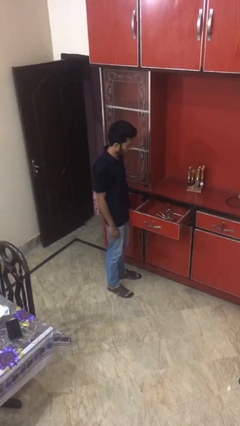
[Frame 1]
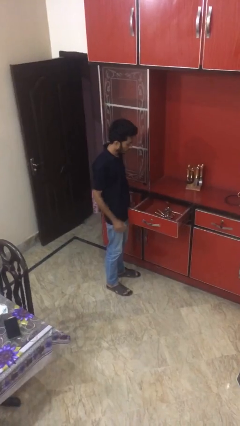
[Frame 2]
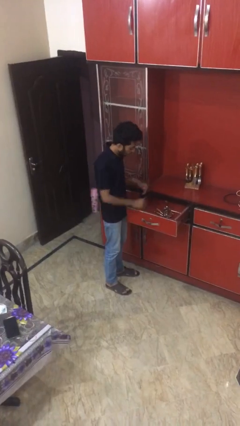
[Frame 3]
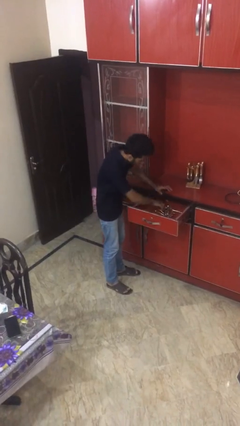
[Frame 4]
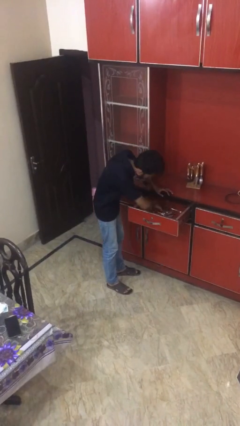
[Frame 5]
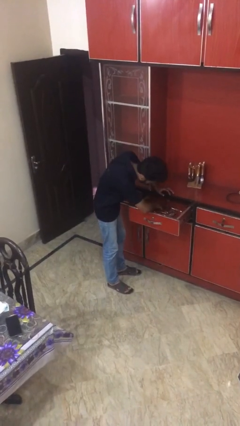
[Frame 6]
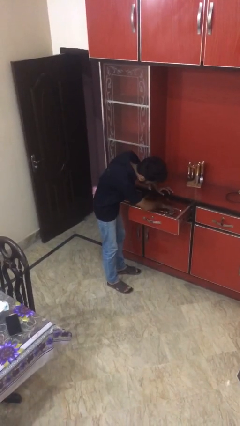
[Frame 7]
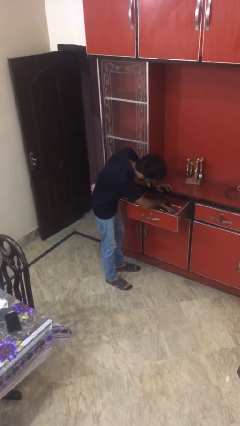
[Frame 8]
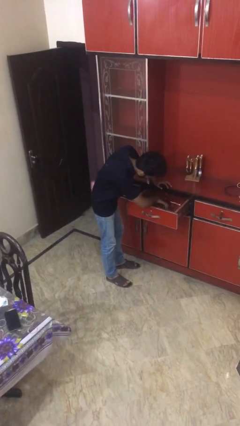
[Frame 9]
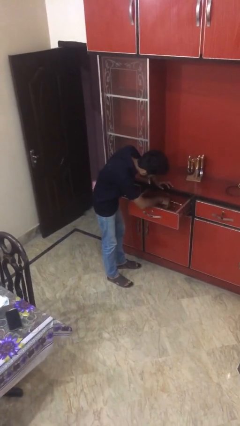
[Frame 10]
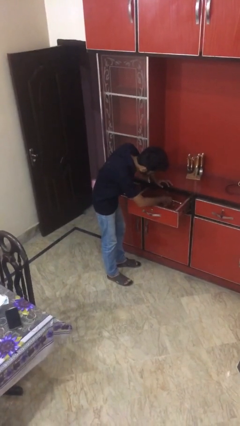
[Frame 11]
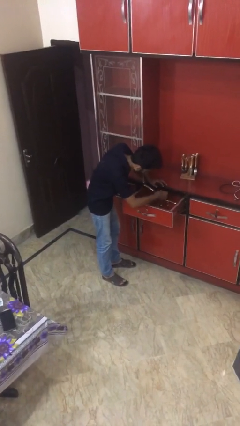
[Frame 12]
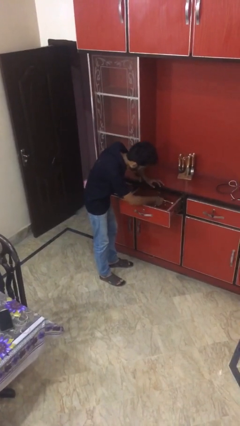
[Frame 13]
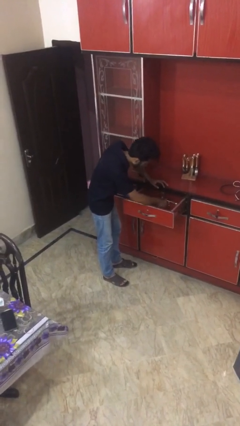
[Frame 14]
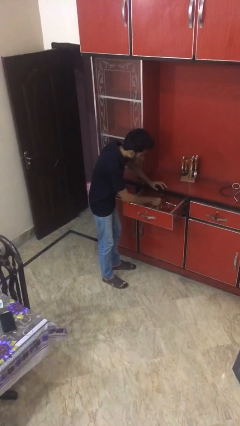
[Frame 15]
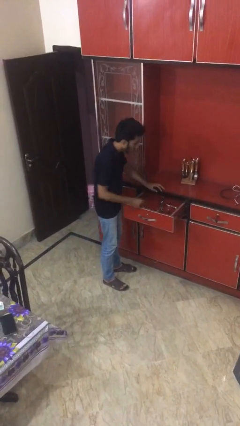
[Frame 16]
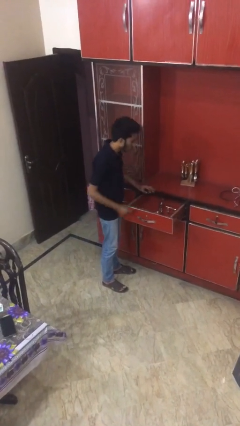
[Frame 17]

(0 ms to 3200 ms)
person searches in kitchen drawer

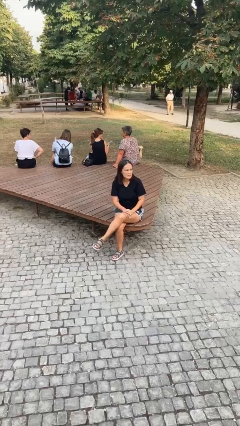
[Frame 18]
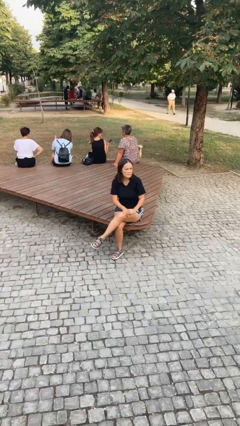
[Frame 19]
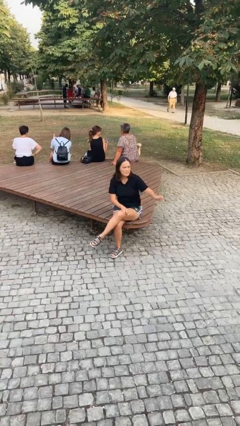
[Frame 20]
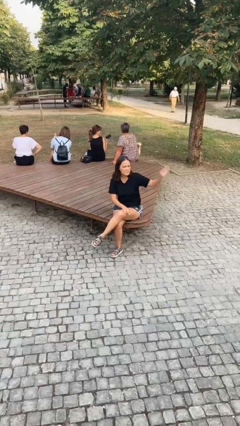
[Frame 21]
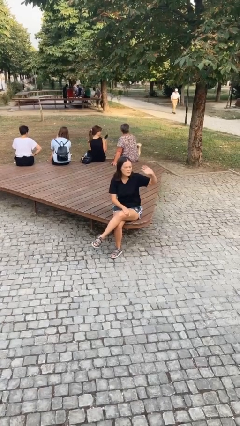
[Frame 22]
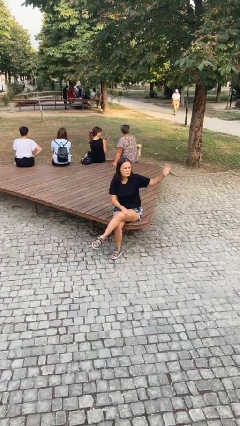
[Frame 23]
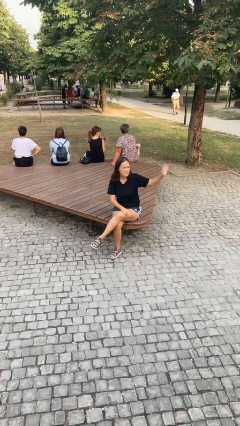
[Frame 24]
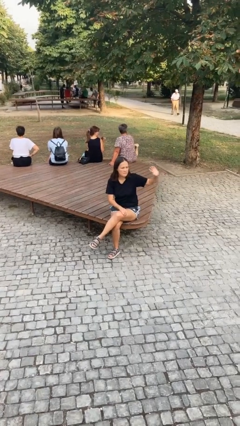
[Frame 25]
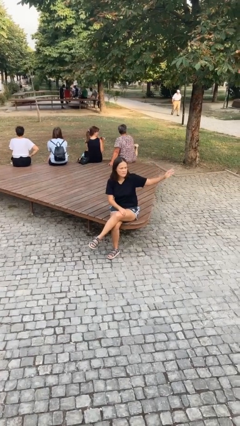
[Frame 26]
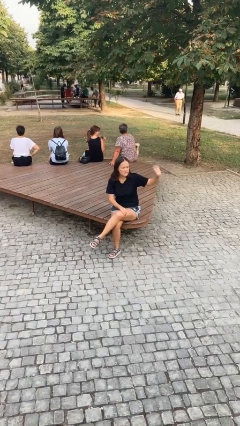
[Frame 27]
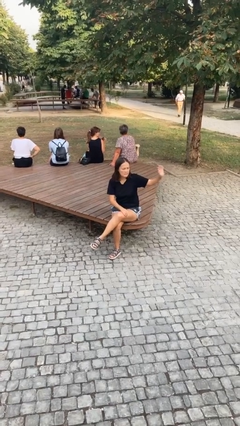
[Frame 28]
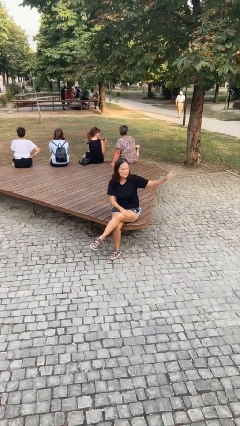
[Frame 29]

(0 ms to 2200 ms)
person waves at person

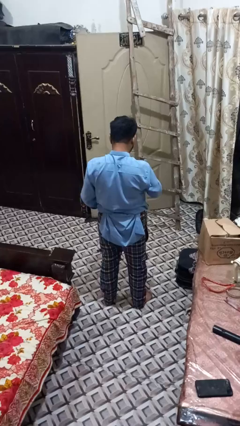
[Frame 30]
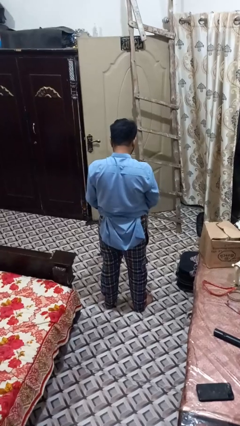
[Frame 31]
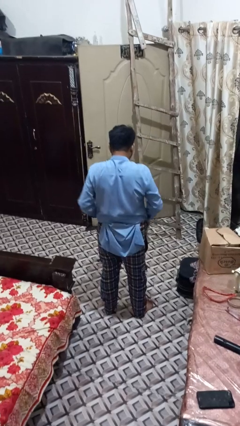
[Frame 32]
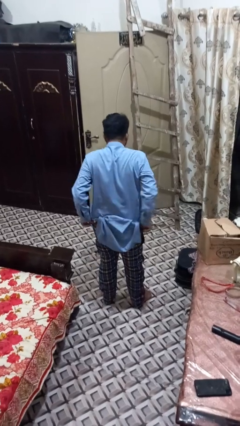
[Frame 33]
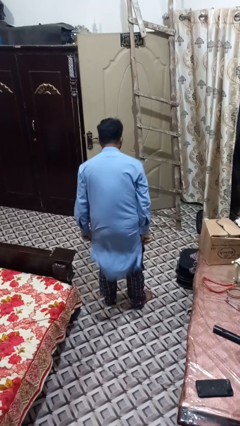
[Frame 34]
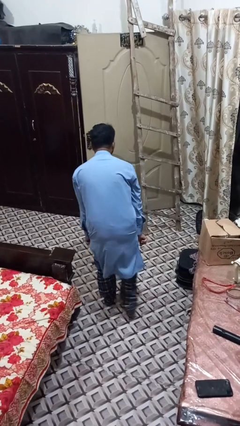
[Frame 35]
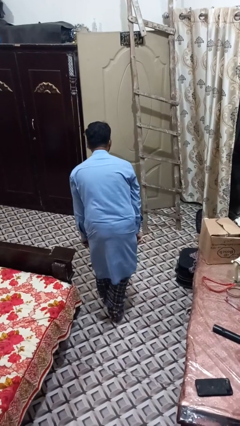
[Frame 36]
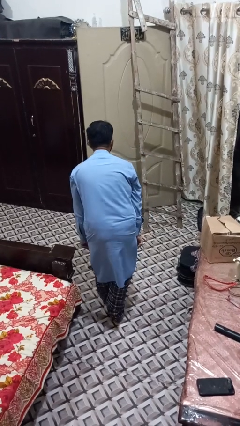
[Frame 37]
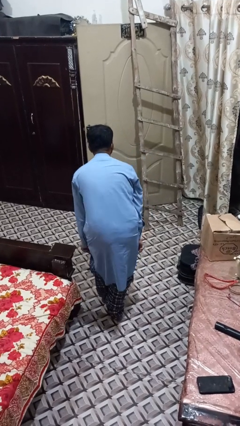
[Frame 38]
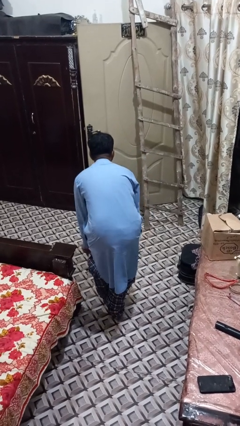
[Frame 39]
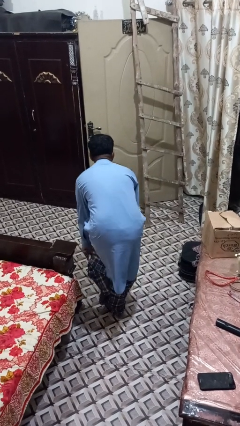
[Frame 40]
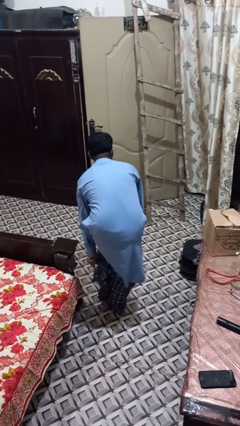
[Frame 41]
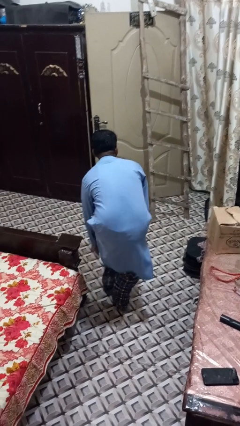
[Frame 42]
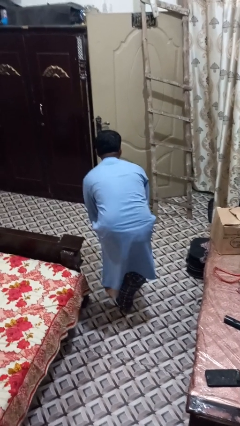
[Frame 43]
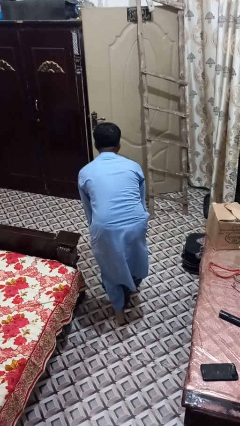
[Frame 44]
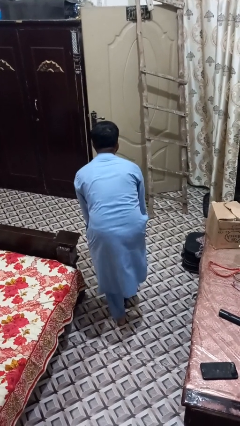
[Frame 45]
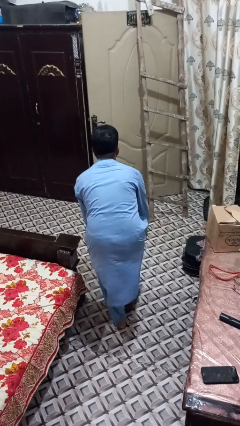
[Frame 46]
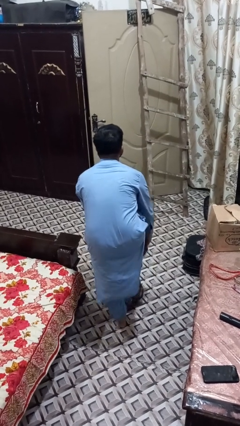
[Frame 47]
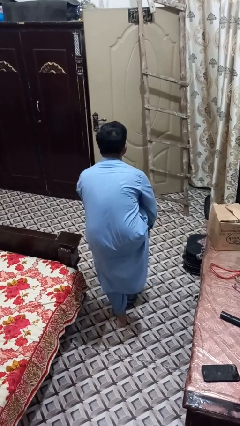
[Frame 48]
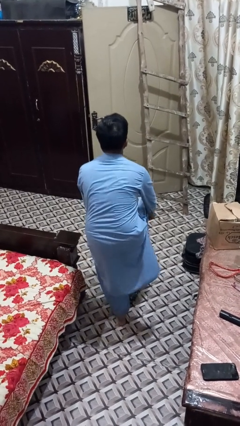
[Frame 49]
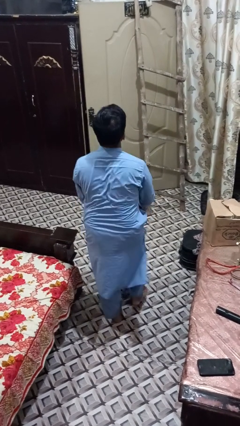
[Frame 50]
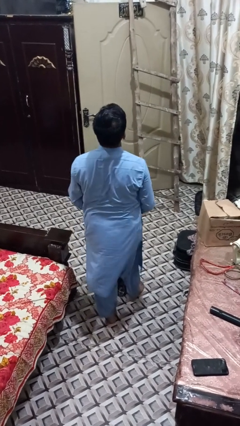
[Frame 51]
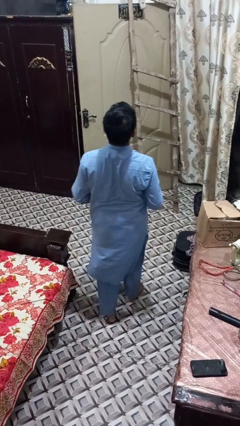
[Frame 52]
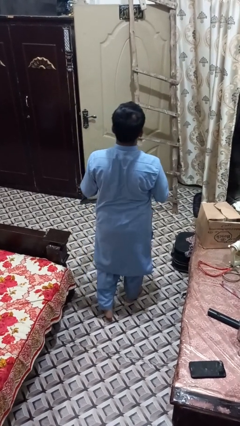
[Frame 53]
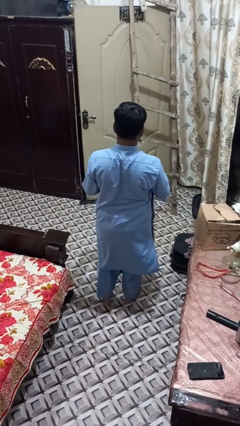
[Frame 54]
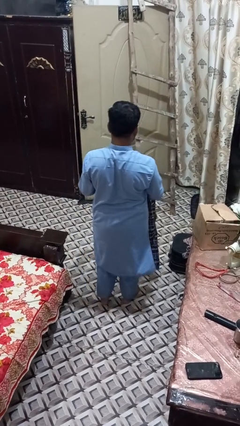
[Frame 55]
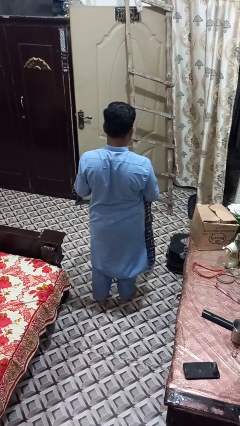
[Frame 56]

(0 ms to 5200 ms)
person takes off pants

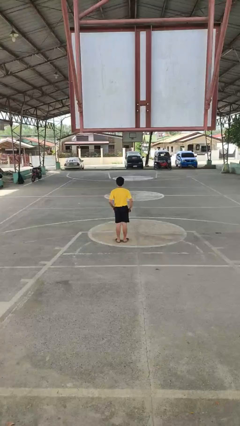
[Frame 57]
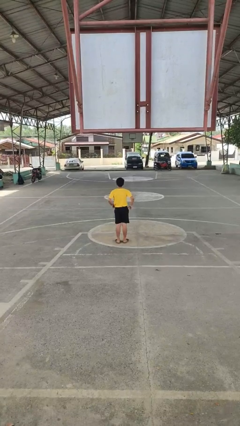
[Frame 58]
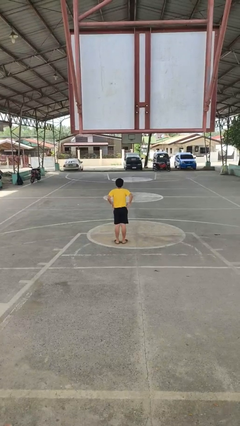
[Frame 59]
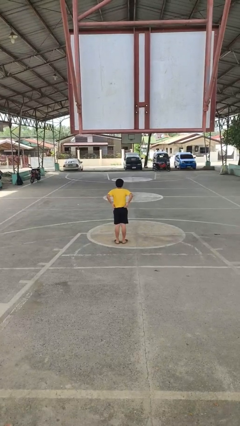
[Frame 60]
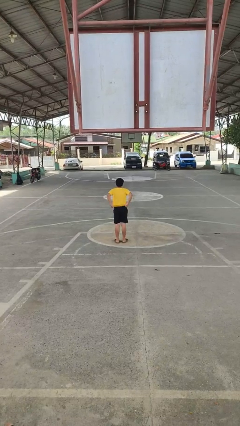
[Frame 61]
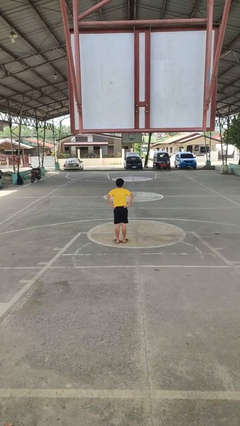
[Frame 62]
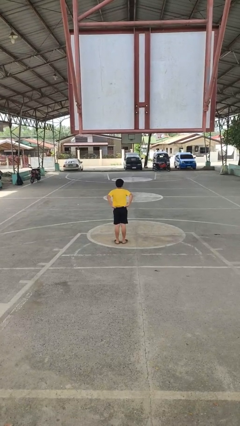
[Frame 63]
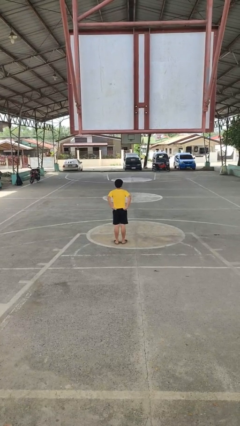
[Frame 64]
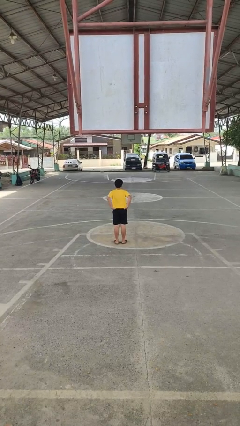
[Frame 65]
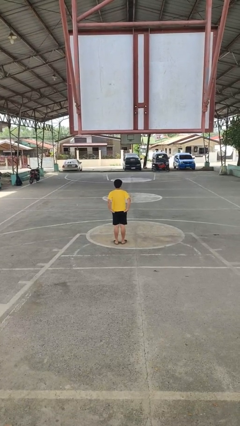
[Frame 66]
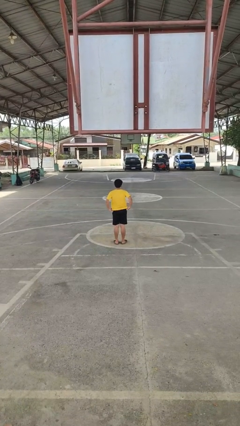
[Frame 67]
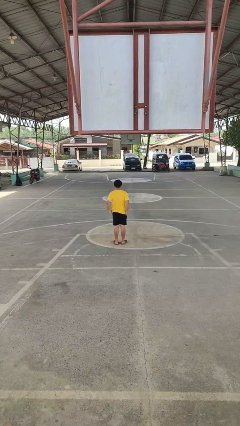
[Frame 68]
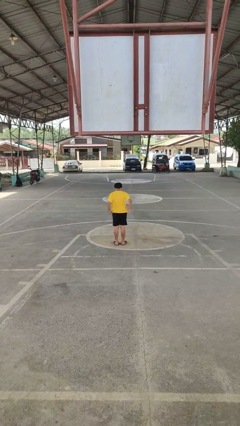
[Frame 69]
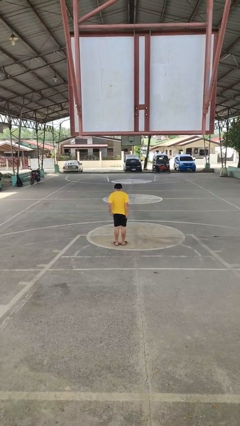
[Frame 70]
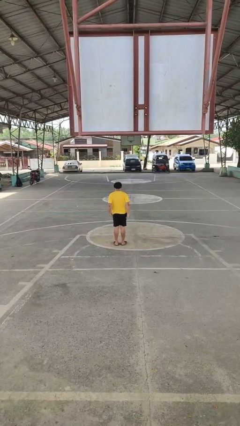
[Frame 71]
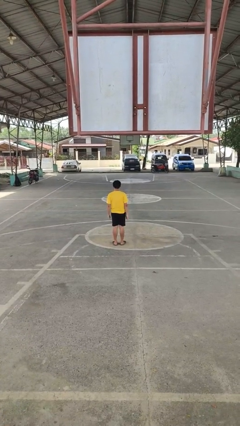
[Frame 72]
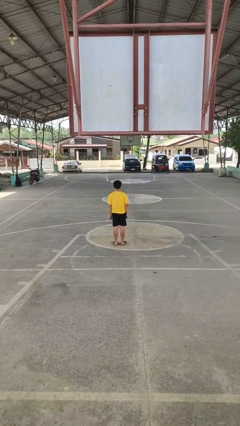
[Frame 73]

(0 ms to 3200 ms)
person untucks shirt

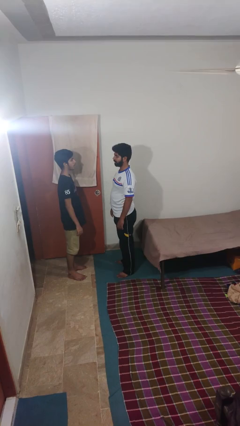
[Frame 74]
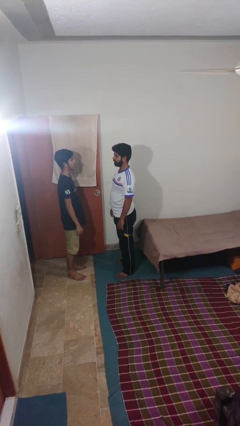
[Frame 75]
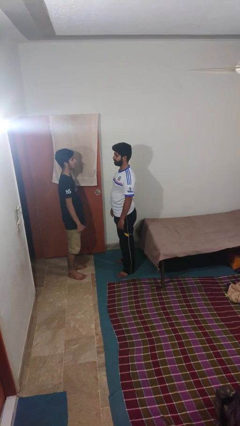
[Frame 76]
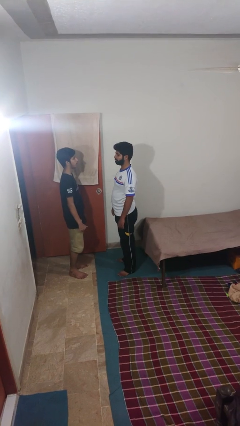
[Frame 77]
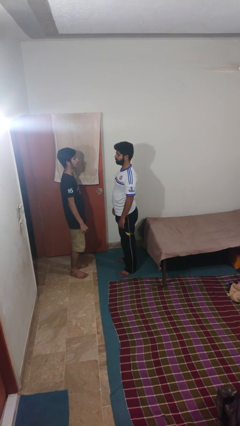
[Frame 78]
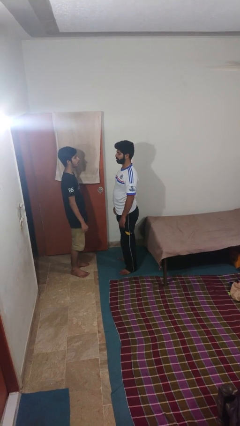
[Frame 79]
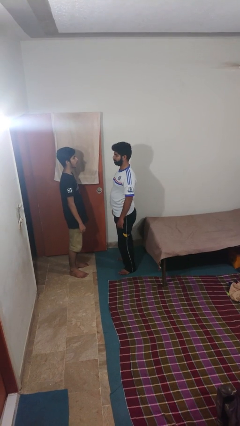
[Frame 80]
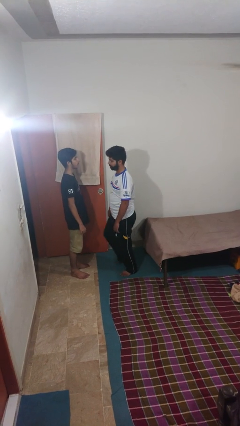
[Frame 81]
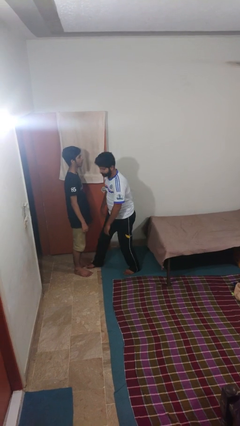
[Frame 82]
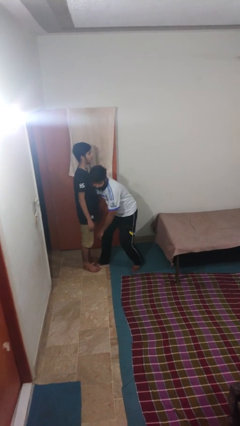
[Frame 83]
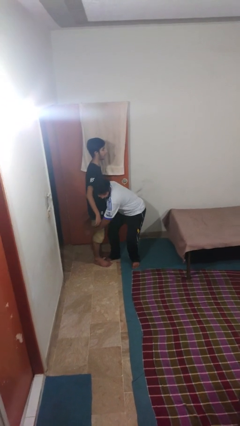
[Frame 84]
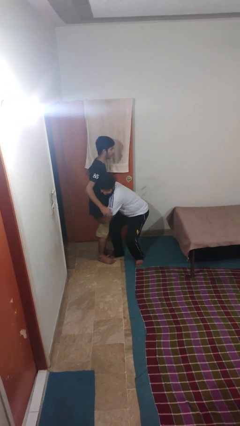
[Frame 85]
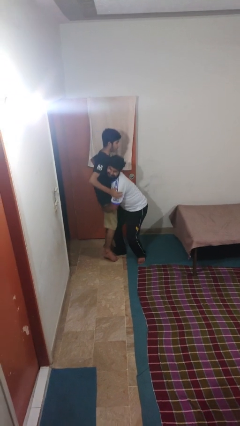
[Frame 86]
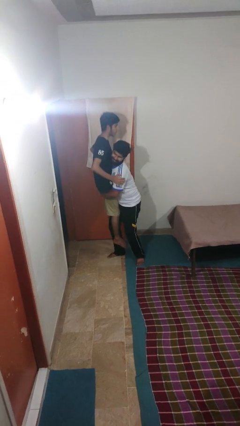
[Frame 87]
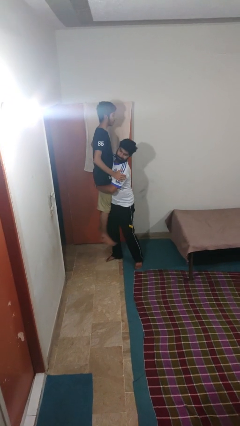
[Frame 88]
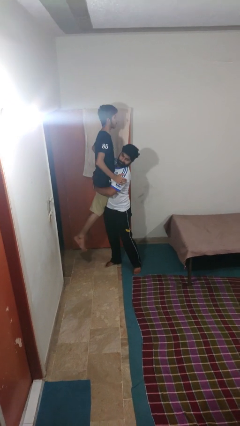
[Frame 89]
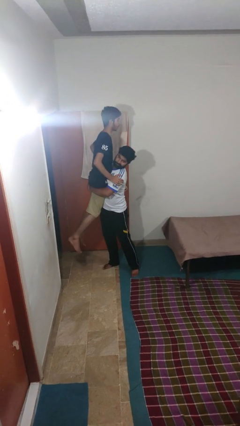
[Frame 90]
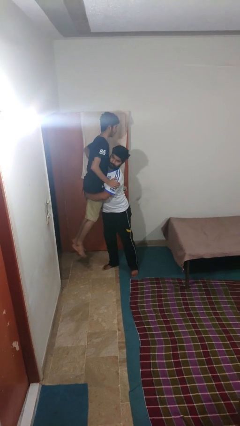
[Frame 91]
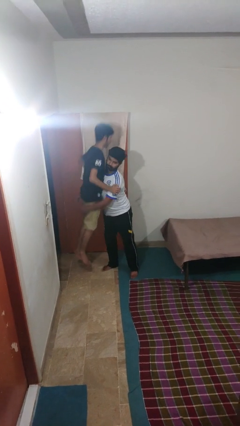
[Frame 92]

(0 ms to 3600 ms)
person picks up person
